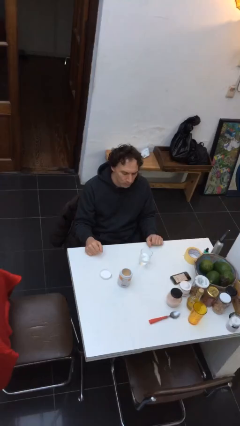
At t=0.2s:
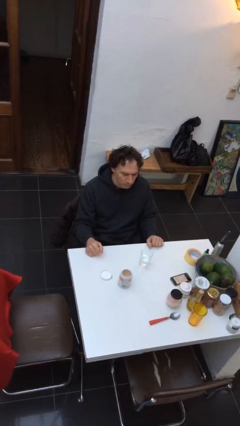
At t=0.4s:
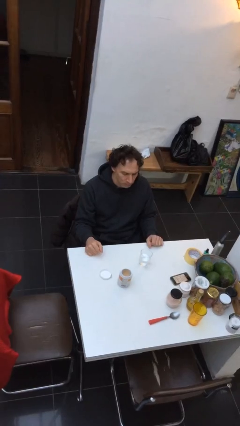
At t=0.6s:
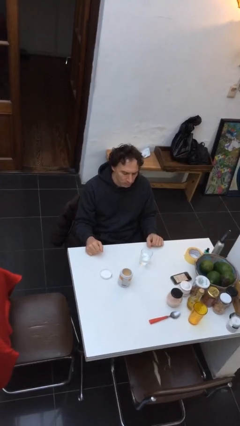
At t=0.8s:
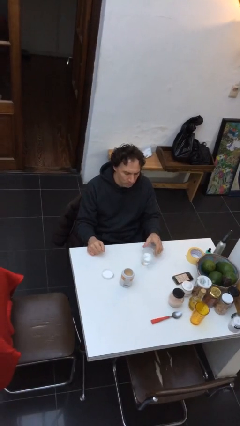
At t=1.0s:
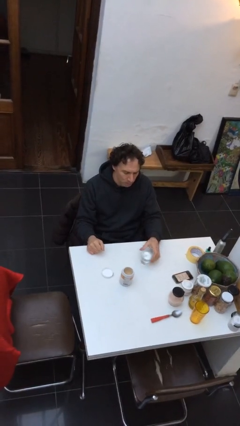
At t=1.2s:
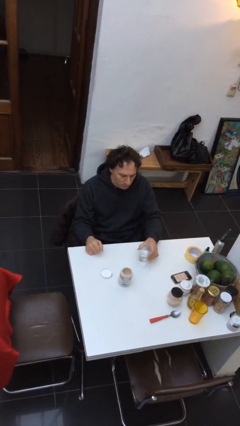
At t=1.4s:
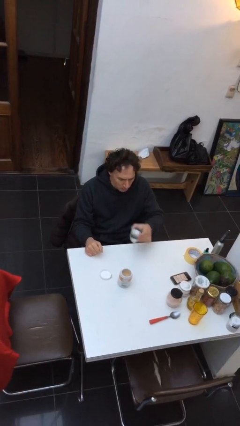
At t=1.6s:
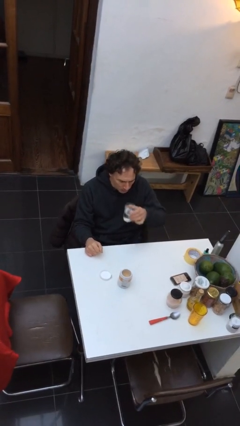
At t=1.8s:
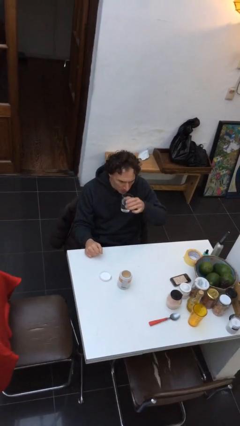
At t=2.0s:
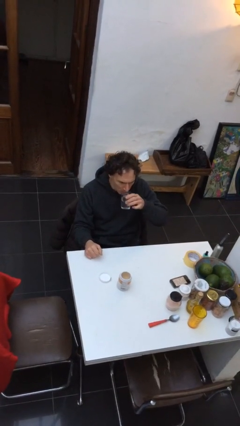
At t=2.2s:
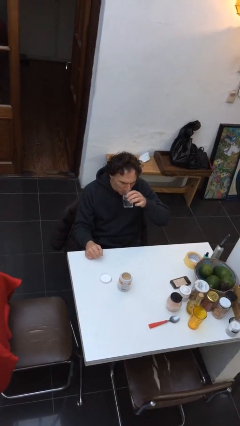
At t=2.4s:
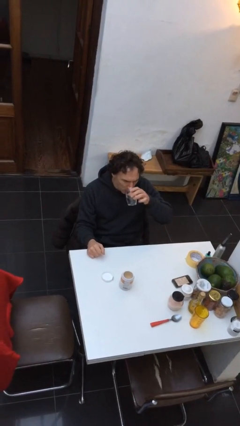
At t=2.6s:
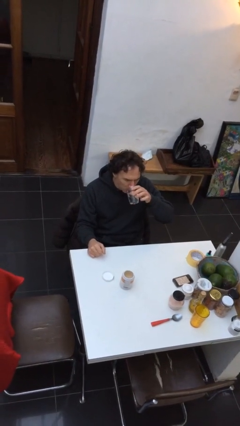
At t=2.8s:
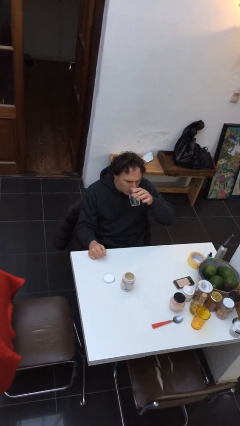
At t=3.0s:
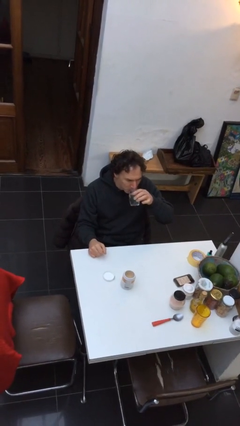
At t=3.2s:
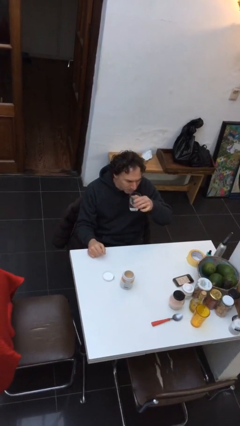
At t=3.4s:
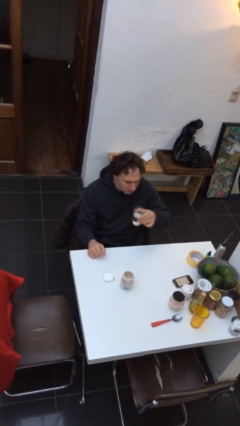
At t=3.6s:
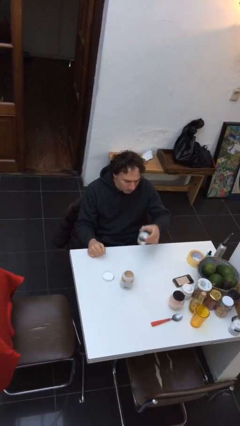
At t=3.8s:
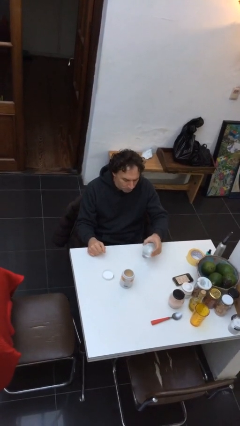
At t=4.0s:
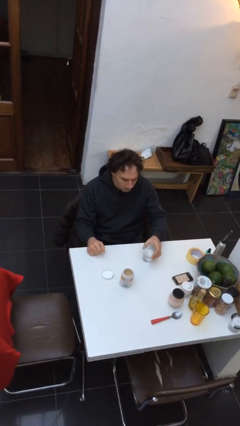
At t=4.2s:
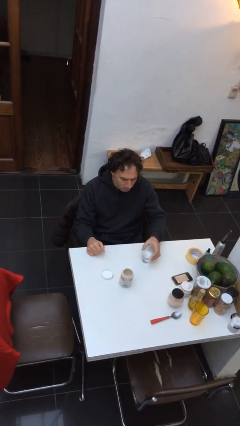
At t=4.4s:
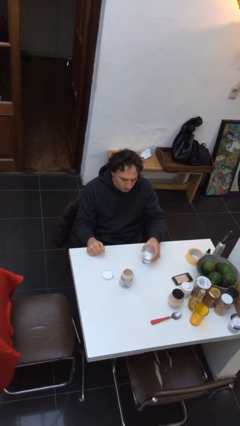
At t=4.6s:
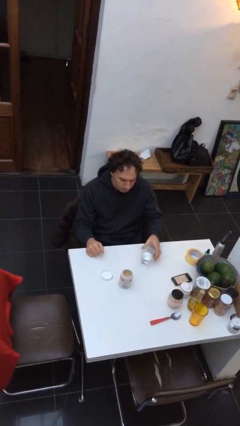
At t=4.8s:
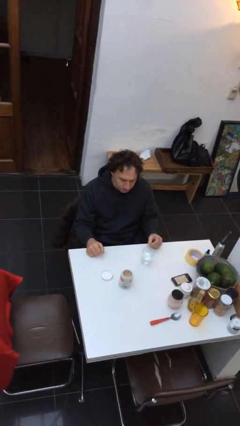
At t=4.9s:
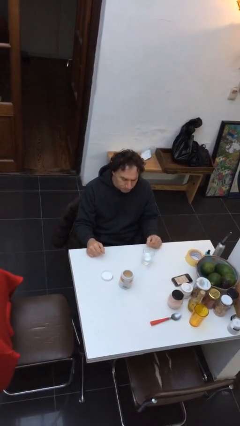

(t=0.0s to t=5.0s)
person drinks from cup

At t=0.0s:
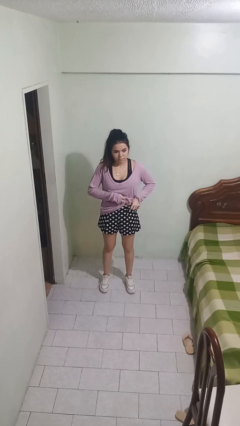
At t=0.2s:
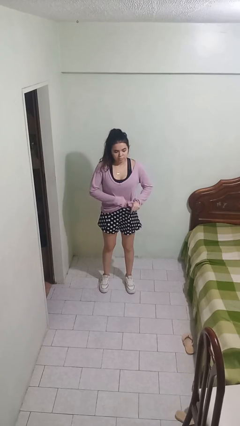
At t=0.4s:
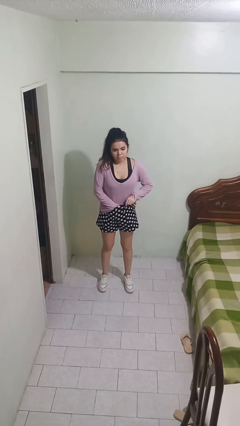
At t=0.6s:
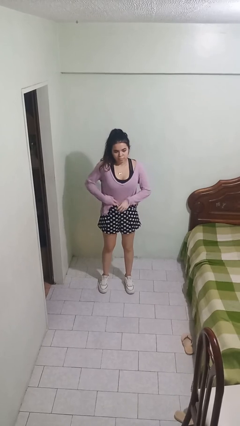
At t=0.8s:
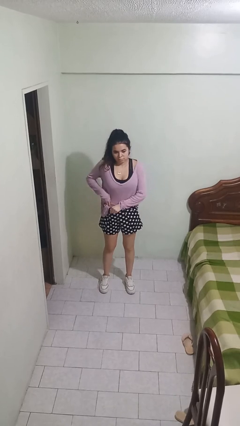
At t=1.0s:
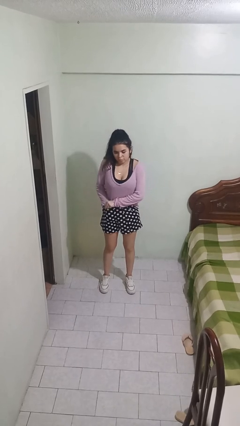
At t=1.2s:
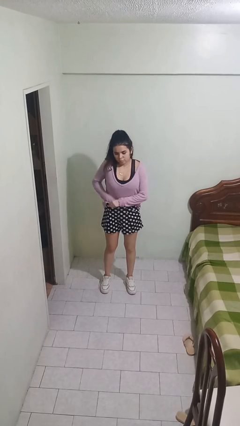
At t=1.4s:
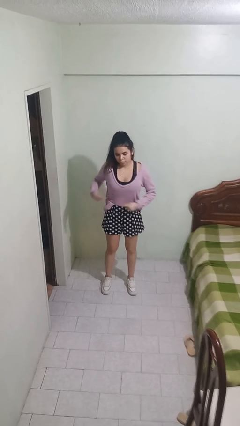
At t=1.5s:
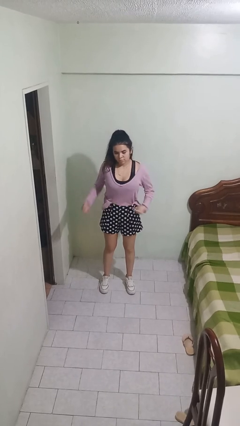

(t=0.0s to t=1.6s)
person tucks in shirt

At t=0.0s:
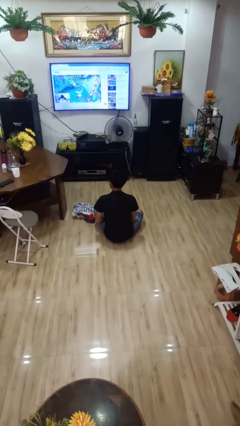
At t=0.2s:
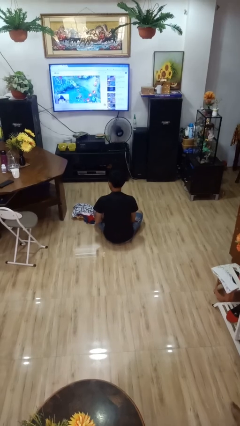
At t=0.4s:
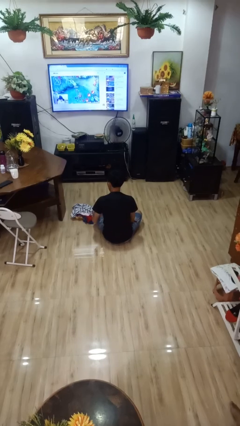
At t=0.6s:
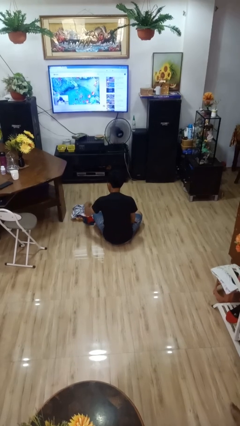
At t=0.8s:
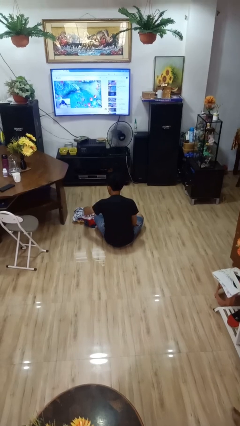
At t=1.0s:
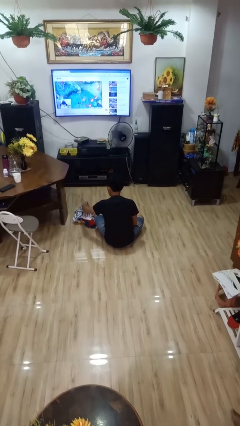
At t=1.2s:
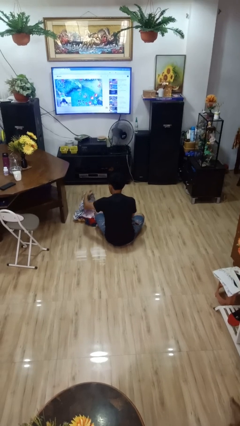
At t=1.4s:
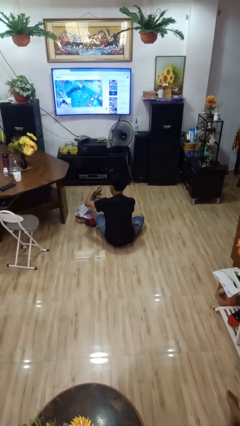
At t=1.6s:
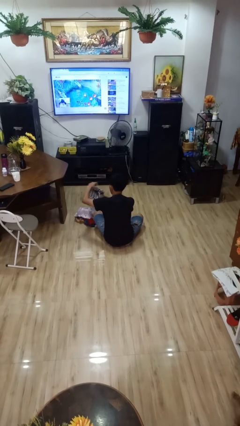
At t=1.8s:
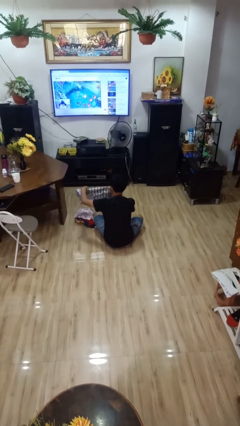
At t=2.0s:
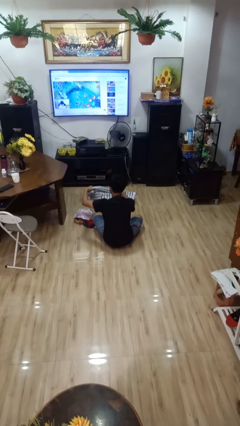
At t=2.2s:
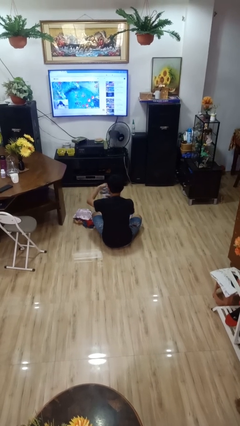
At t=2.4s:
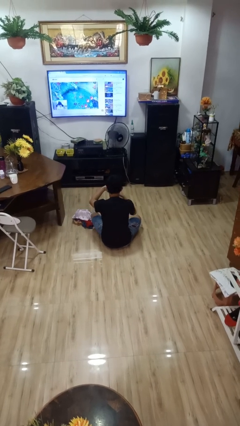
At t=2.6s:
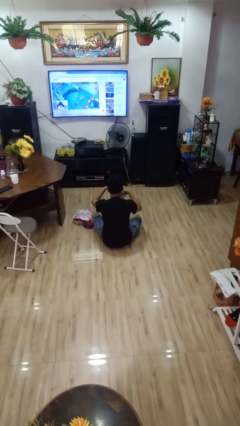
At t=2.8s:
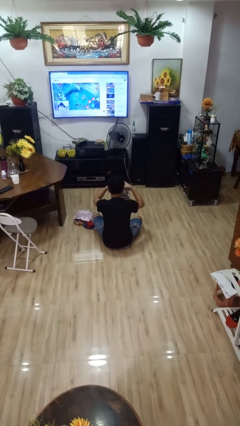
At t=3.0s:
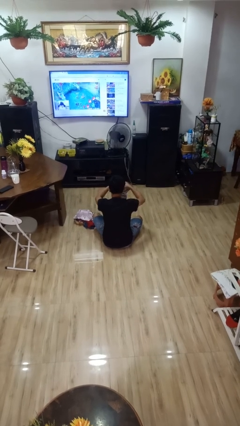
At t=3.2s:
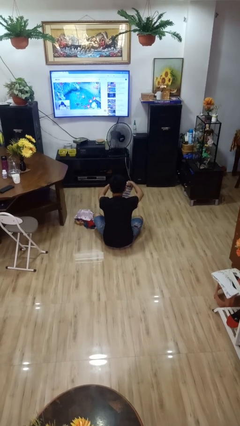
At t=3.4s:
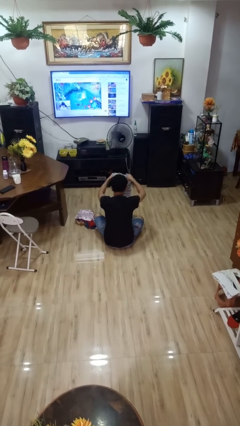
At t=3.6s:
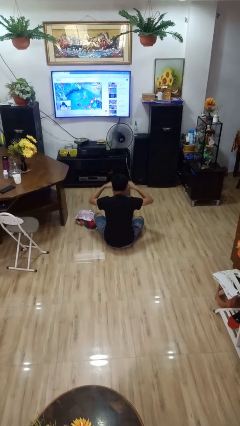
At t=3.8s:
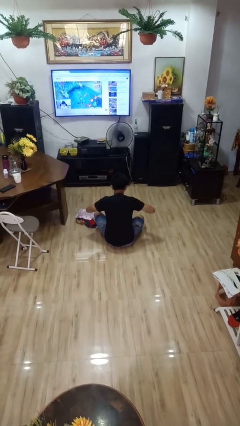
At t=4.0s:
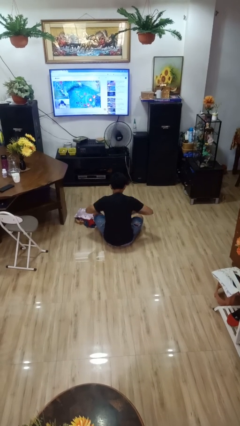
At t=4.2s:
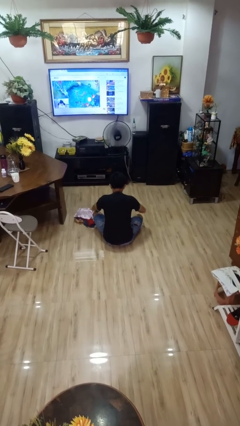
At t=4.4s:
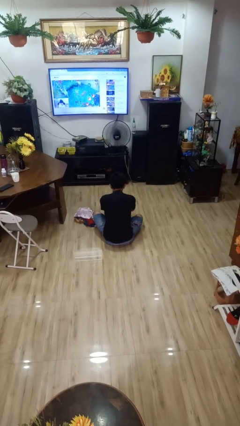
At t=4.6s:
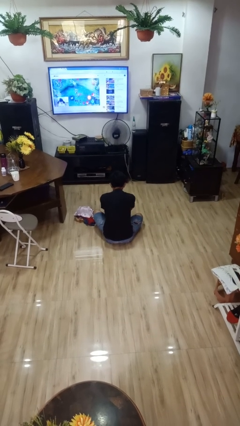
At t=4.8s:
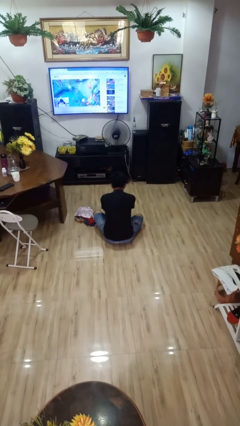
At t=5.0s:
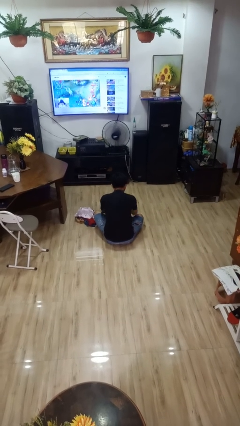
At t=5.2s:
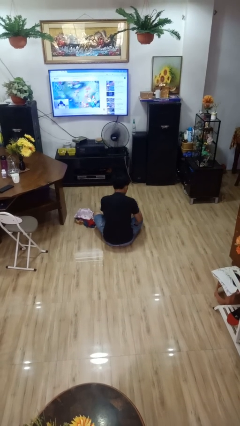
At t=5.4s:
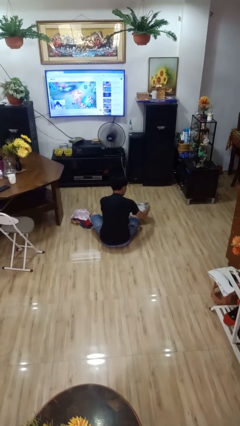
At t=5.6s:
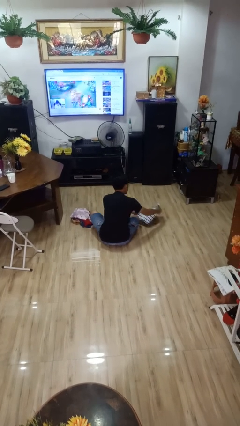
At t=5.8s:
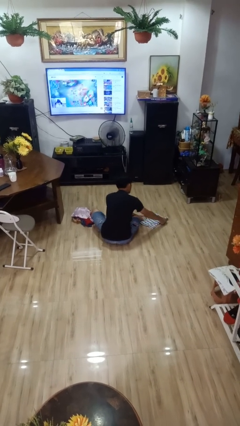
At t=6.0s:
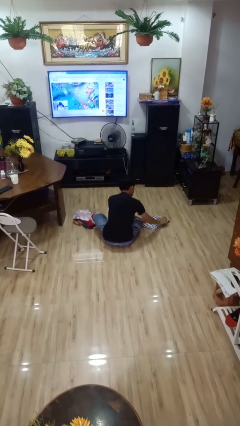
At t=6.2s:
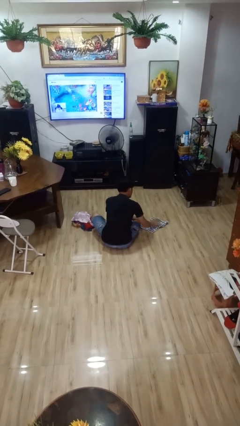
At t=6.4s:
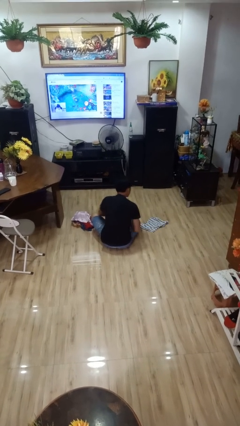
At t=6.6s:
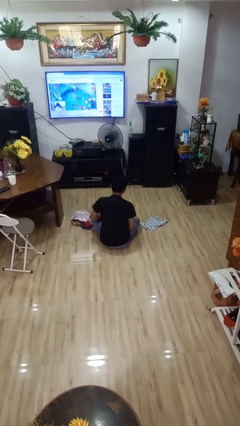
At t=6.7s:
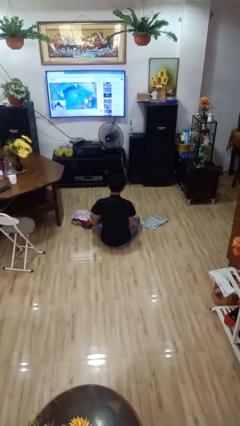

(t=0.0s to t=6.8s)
person folds shirt

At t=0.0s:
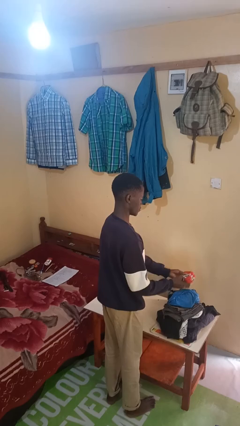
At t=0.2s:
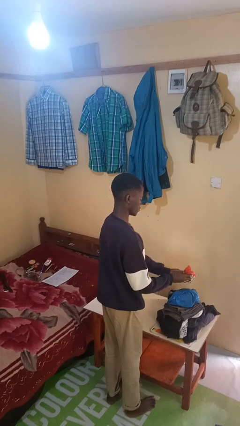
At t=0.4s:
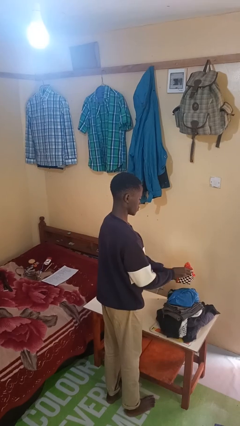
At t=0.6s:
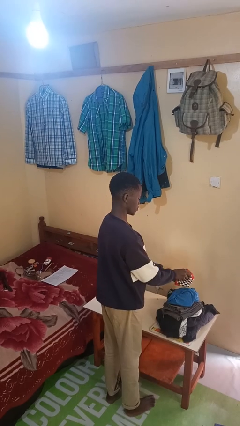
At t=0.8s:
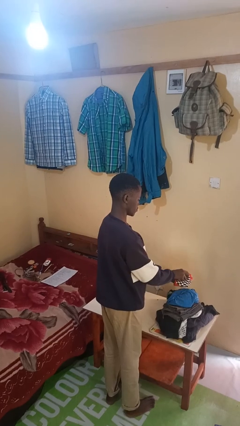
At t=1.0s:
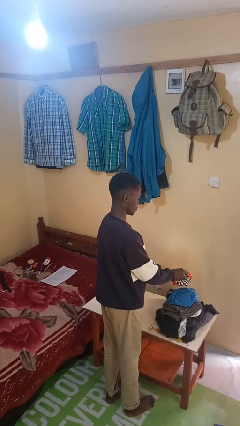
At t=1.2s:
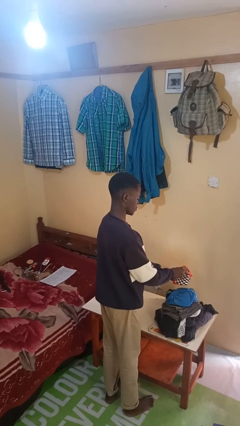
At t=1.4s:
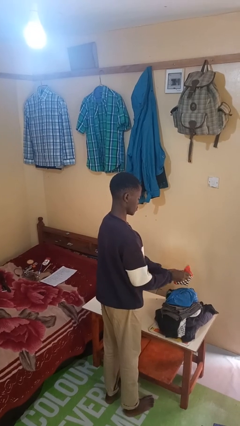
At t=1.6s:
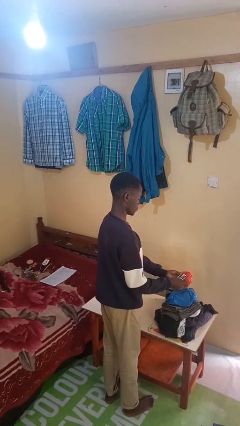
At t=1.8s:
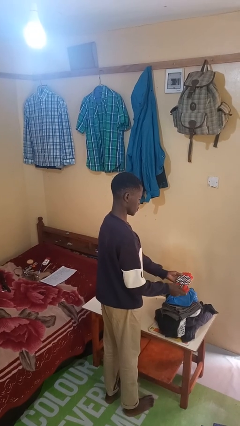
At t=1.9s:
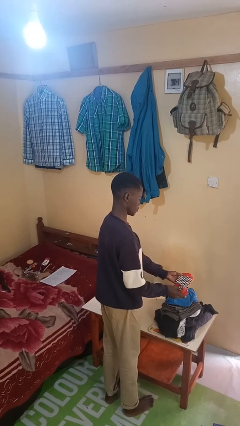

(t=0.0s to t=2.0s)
person folds socks

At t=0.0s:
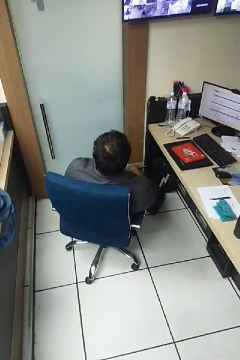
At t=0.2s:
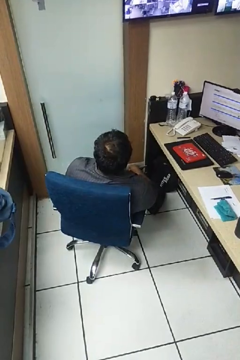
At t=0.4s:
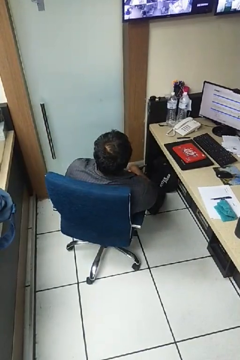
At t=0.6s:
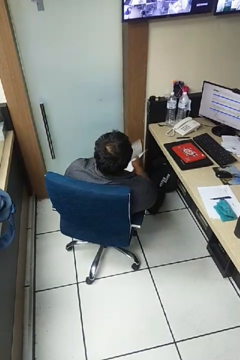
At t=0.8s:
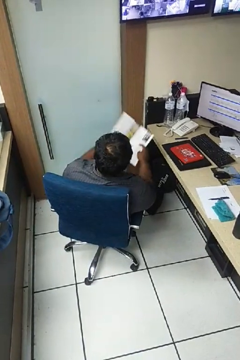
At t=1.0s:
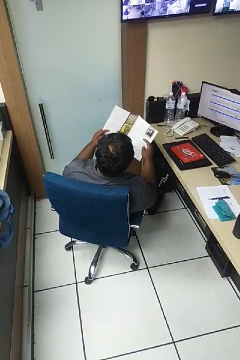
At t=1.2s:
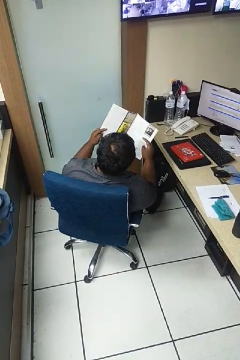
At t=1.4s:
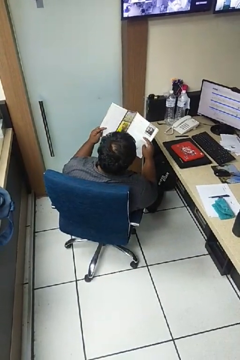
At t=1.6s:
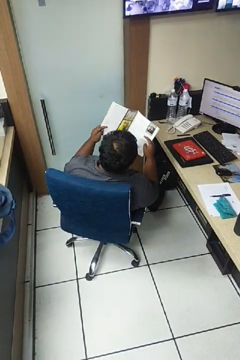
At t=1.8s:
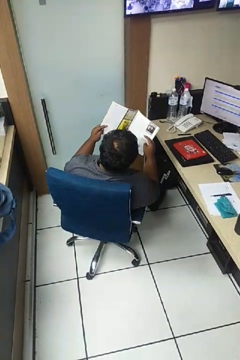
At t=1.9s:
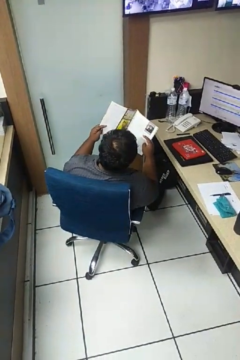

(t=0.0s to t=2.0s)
person reads magazine

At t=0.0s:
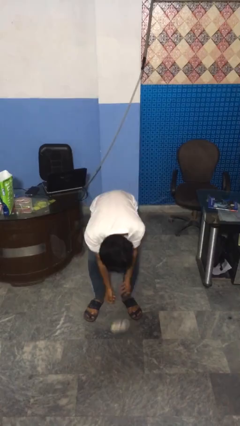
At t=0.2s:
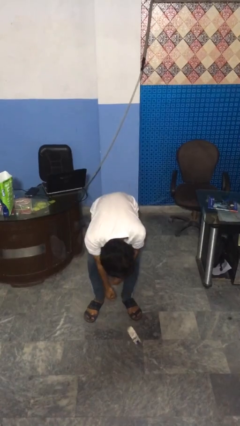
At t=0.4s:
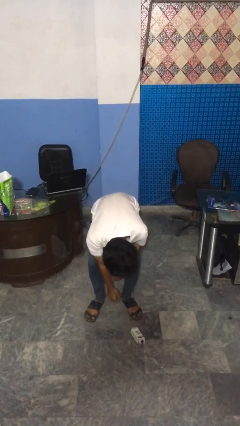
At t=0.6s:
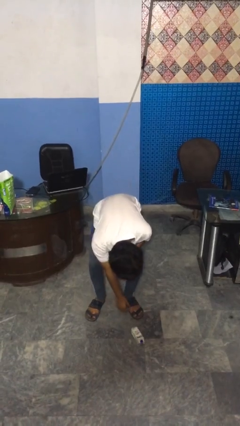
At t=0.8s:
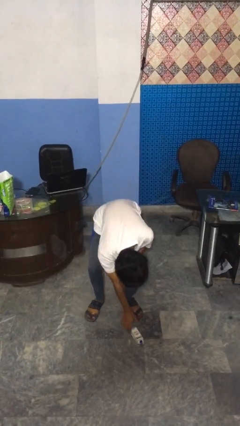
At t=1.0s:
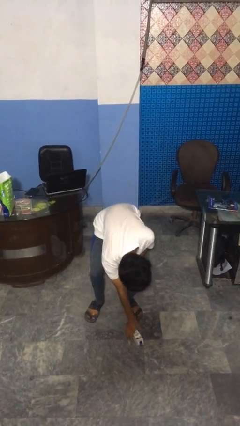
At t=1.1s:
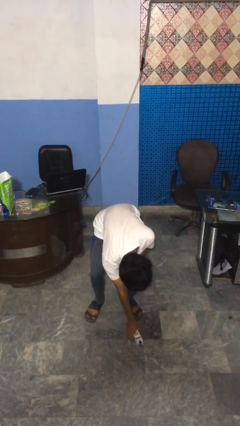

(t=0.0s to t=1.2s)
person catches dropped object
